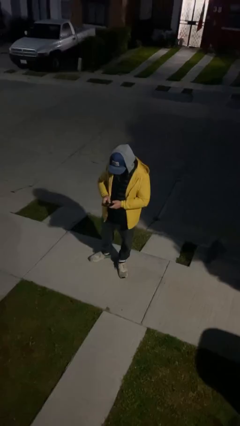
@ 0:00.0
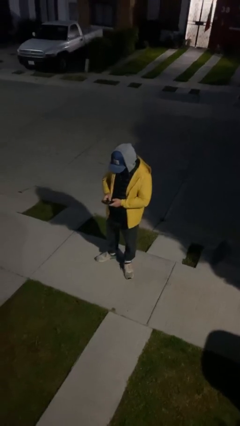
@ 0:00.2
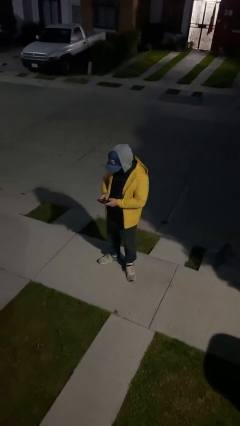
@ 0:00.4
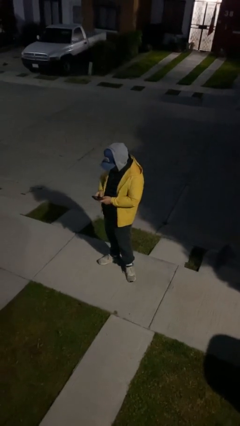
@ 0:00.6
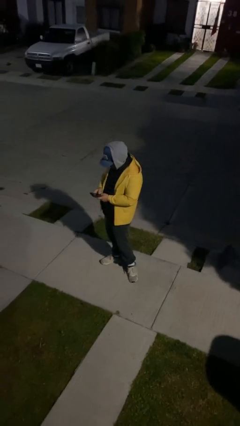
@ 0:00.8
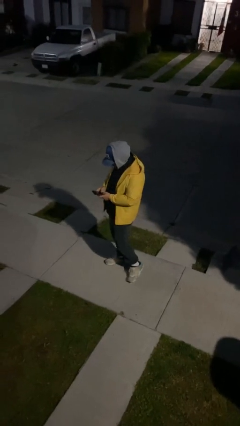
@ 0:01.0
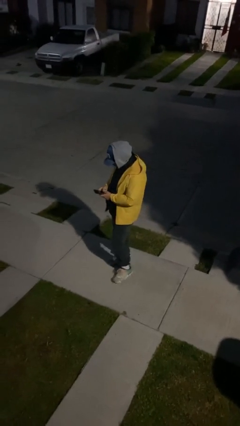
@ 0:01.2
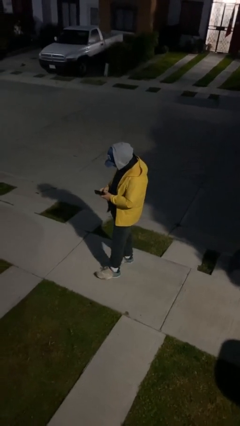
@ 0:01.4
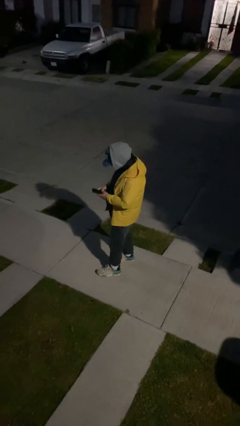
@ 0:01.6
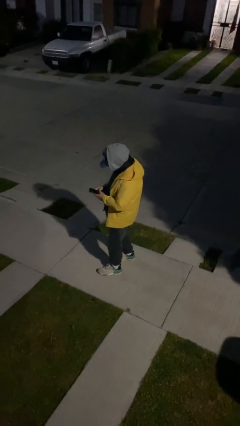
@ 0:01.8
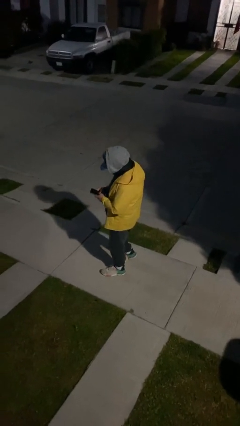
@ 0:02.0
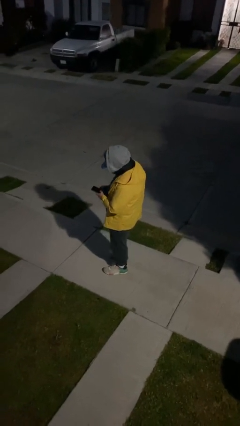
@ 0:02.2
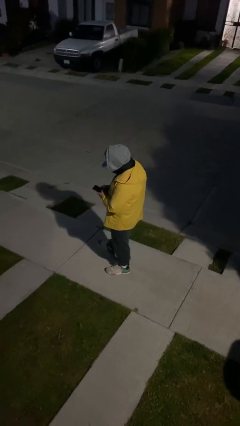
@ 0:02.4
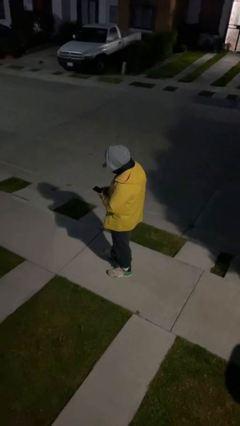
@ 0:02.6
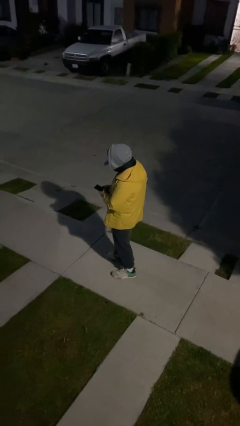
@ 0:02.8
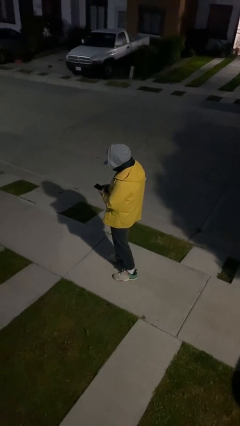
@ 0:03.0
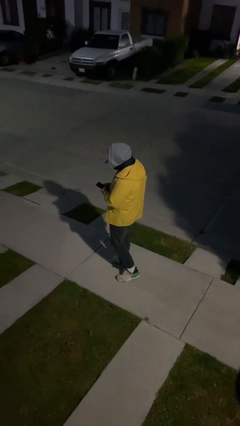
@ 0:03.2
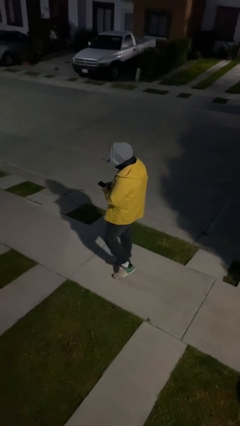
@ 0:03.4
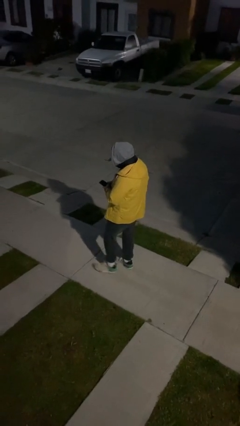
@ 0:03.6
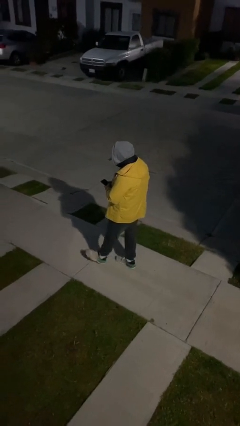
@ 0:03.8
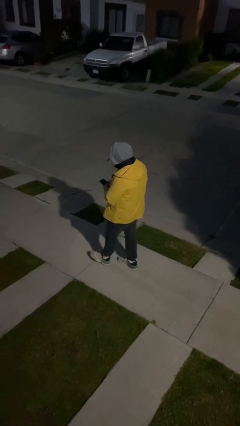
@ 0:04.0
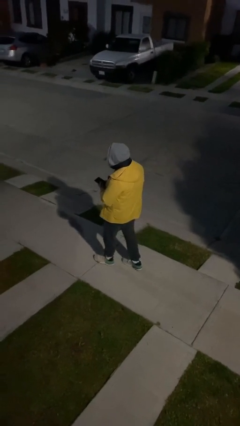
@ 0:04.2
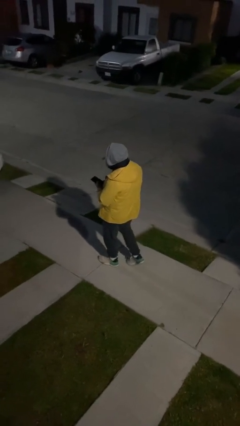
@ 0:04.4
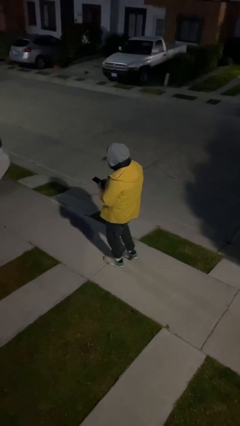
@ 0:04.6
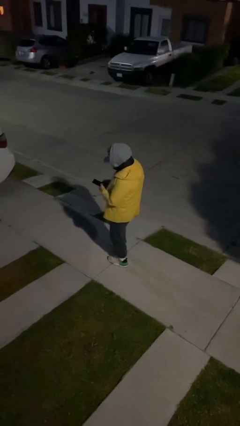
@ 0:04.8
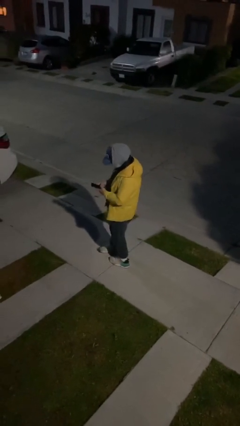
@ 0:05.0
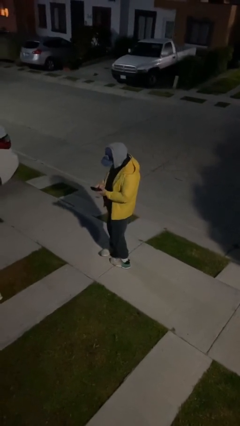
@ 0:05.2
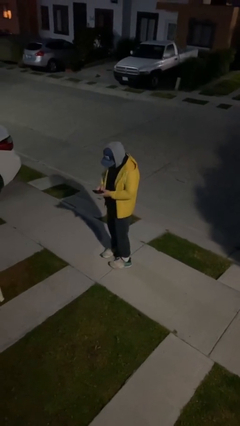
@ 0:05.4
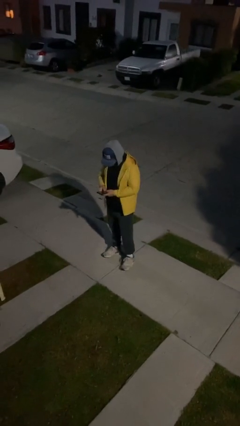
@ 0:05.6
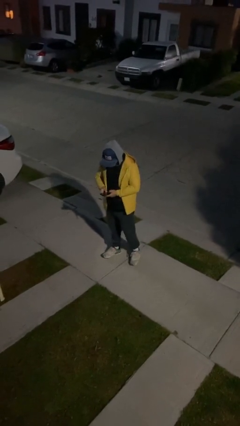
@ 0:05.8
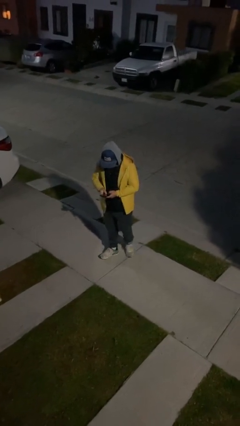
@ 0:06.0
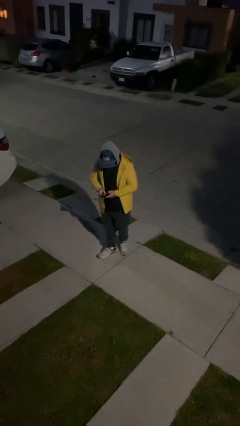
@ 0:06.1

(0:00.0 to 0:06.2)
person texts on phone

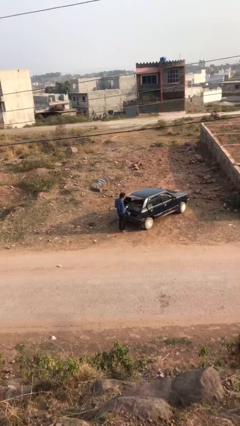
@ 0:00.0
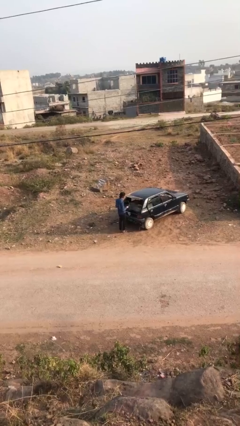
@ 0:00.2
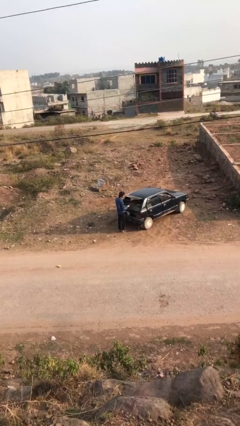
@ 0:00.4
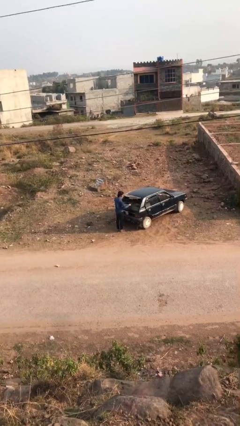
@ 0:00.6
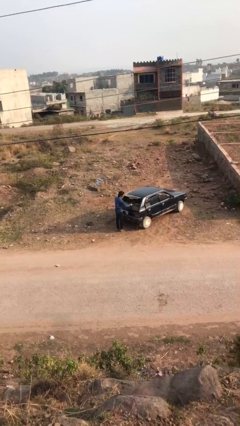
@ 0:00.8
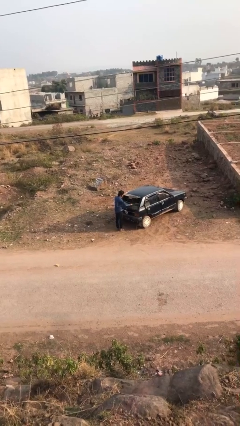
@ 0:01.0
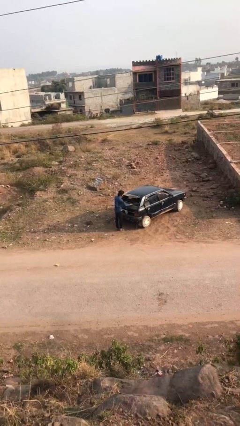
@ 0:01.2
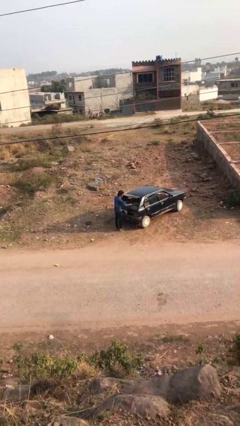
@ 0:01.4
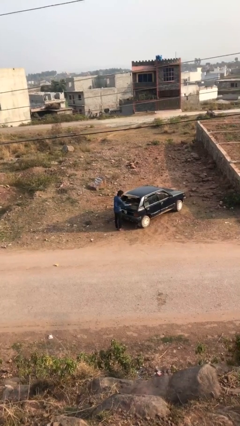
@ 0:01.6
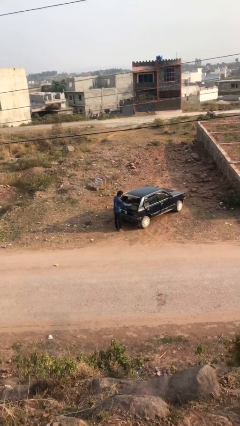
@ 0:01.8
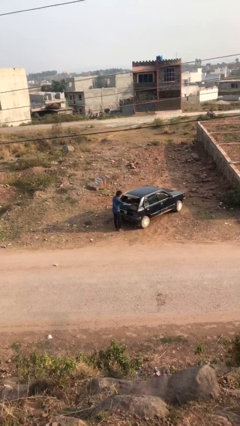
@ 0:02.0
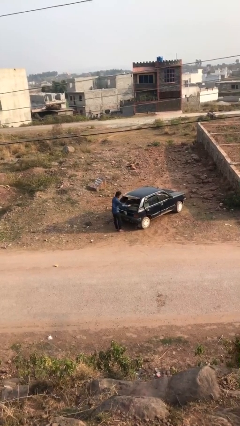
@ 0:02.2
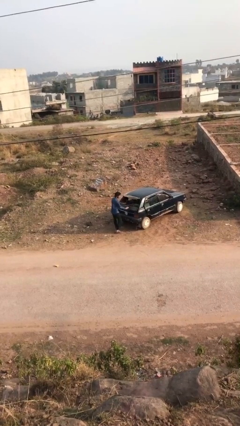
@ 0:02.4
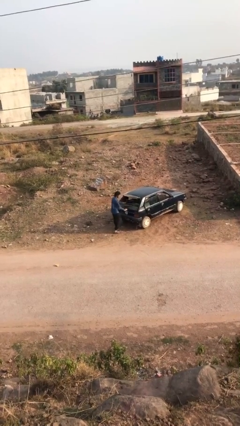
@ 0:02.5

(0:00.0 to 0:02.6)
person loads car

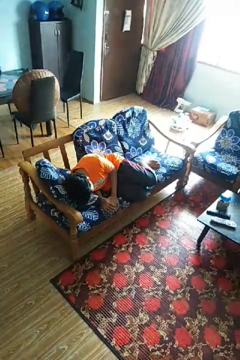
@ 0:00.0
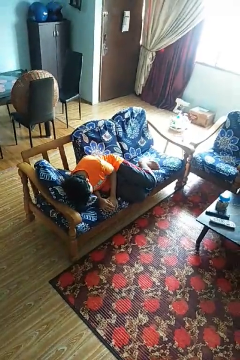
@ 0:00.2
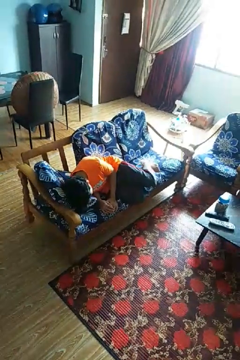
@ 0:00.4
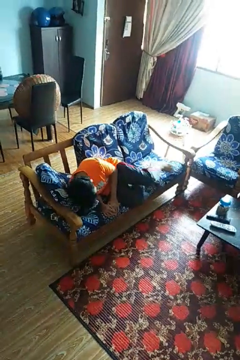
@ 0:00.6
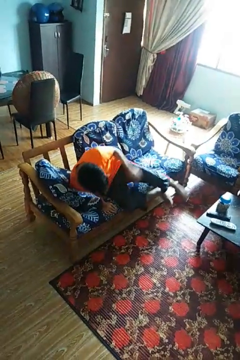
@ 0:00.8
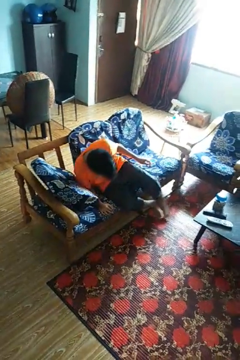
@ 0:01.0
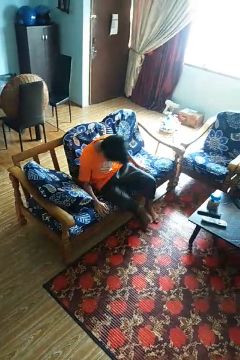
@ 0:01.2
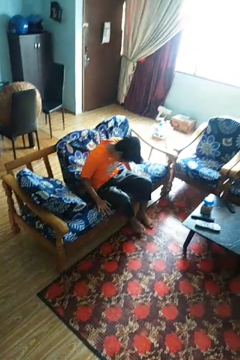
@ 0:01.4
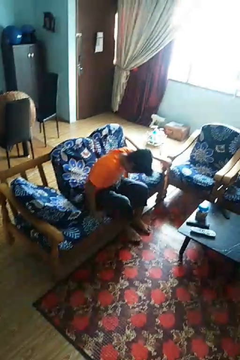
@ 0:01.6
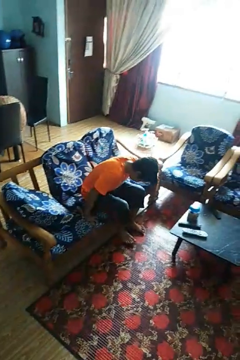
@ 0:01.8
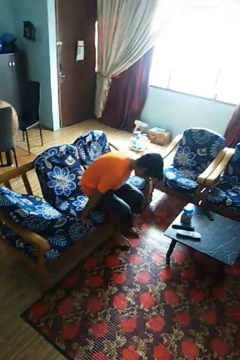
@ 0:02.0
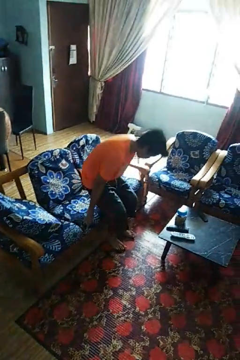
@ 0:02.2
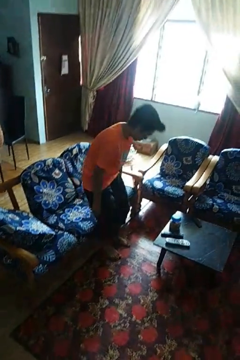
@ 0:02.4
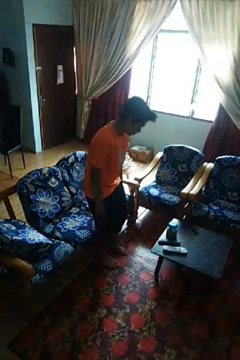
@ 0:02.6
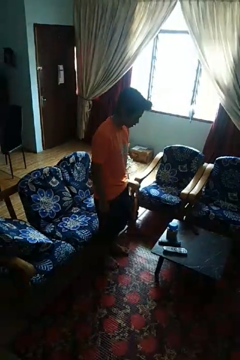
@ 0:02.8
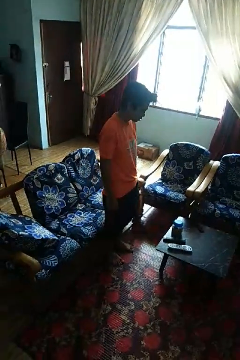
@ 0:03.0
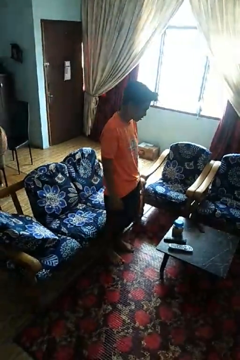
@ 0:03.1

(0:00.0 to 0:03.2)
person stands up

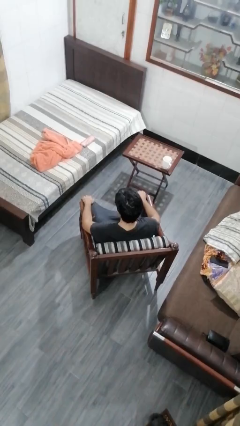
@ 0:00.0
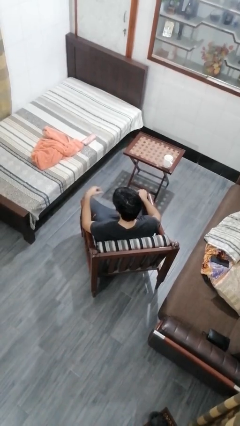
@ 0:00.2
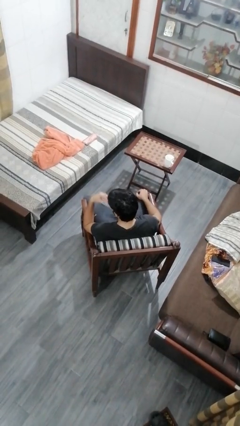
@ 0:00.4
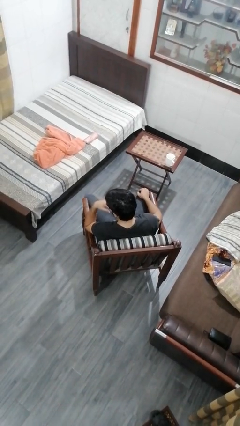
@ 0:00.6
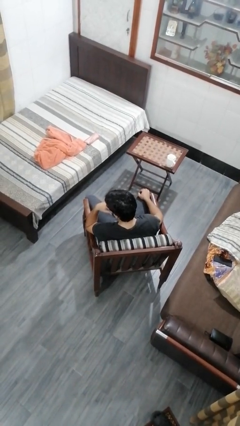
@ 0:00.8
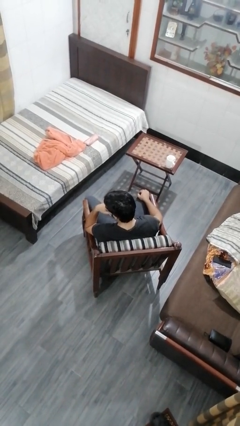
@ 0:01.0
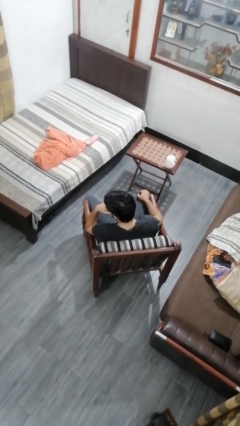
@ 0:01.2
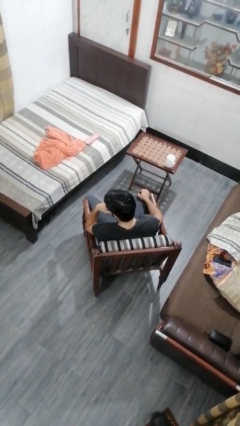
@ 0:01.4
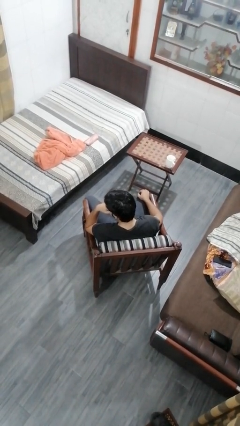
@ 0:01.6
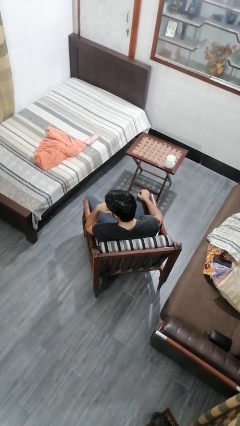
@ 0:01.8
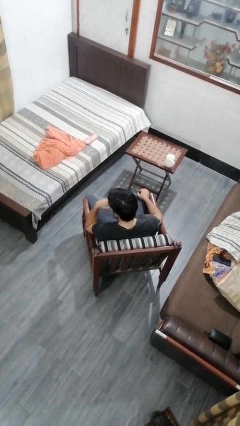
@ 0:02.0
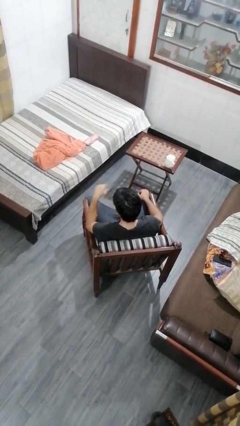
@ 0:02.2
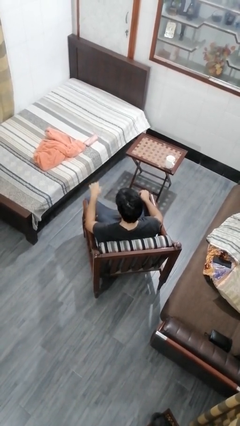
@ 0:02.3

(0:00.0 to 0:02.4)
person strokes chin

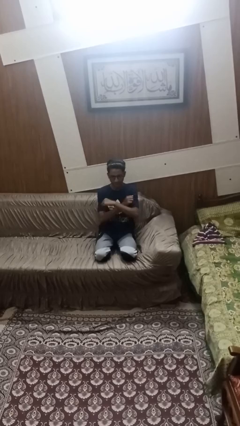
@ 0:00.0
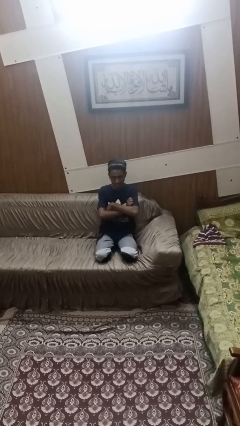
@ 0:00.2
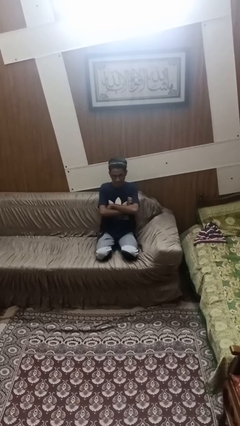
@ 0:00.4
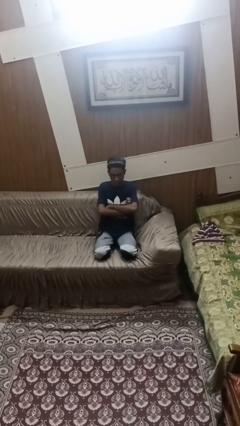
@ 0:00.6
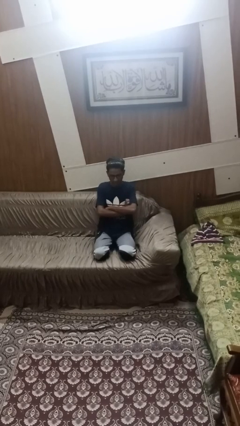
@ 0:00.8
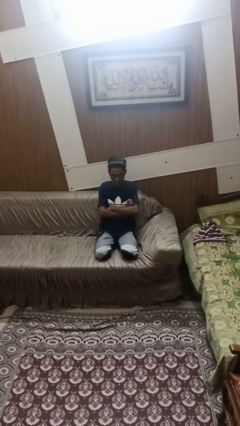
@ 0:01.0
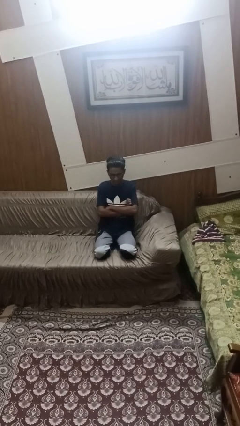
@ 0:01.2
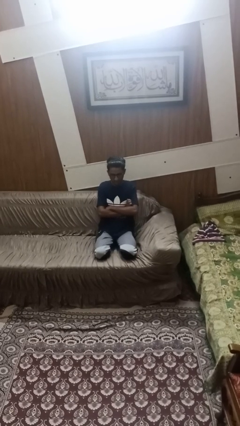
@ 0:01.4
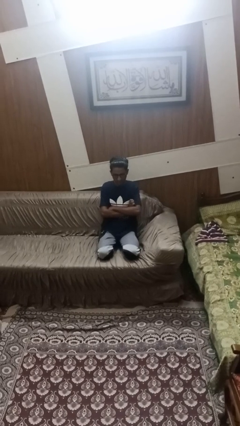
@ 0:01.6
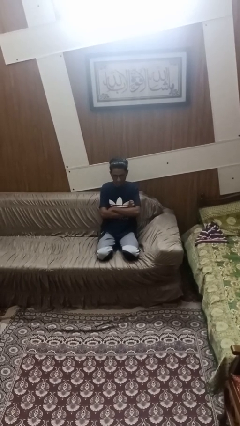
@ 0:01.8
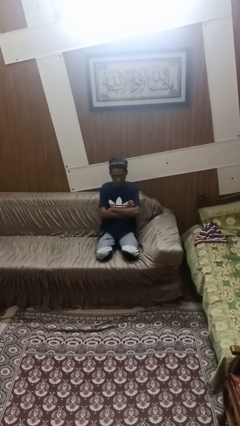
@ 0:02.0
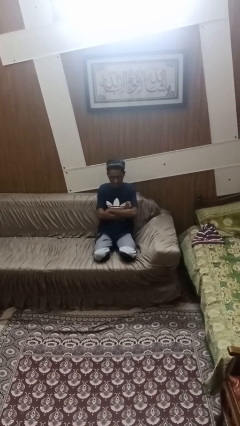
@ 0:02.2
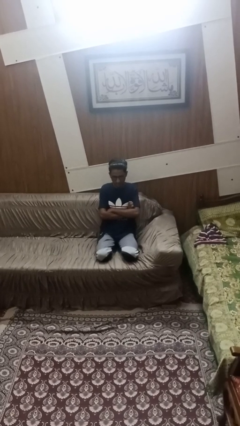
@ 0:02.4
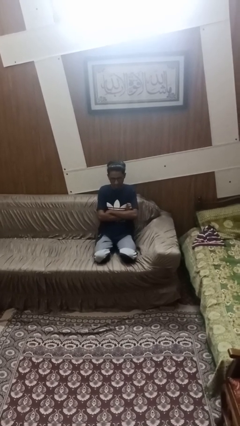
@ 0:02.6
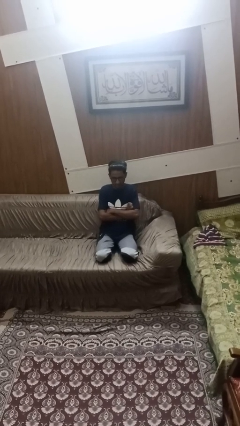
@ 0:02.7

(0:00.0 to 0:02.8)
person crosses arms

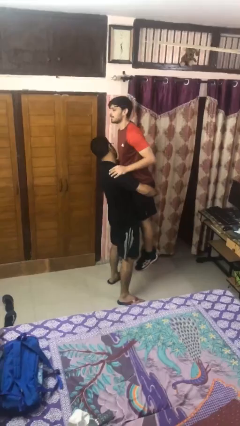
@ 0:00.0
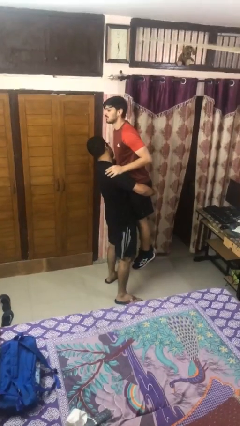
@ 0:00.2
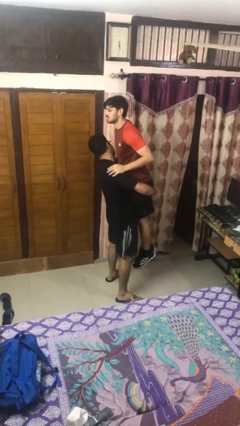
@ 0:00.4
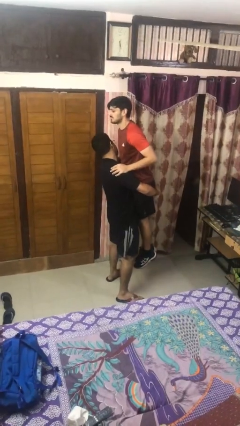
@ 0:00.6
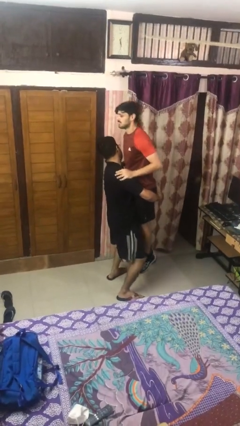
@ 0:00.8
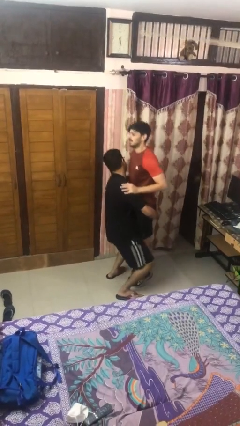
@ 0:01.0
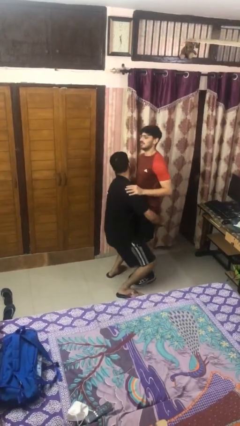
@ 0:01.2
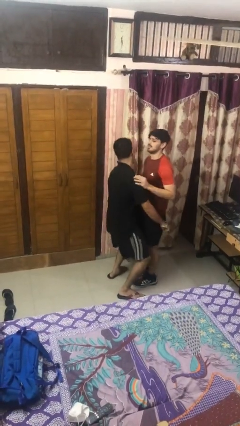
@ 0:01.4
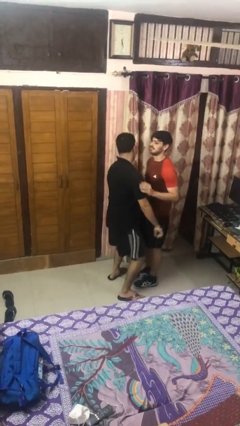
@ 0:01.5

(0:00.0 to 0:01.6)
person puts down person
